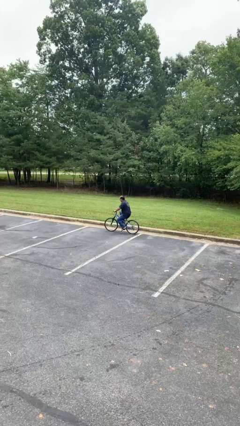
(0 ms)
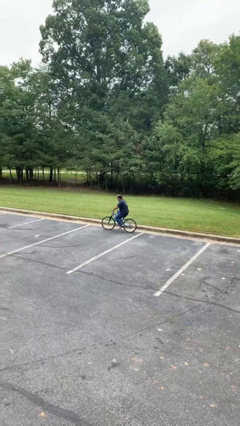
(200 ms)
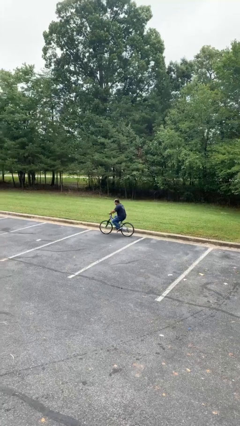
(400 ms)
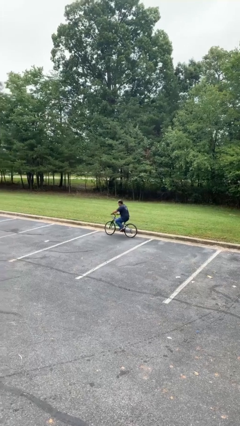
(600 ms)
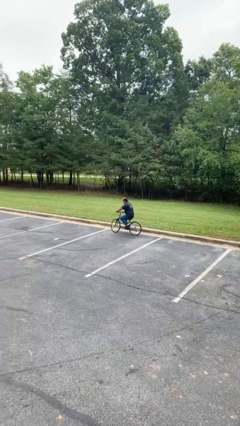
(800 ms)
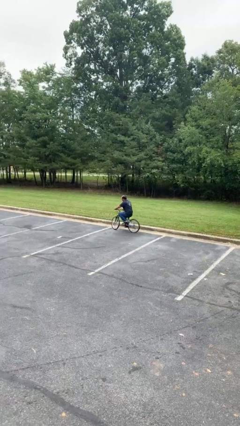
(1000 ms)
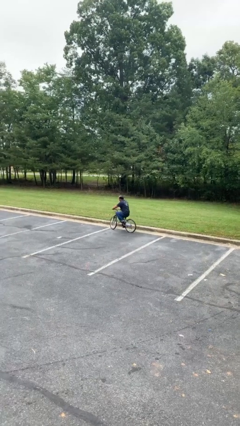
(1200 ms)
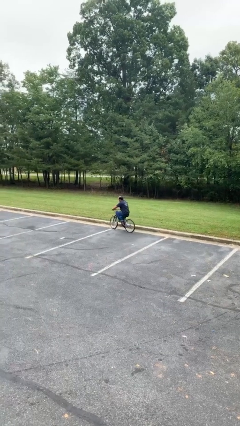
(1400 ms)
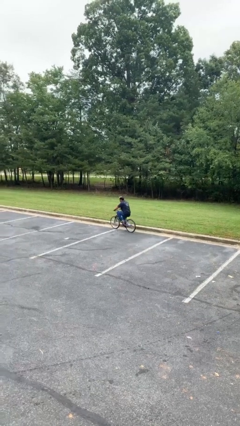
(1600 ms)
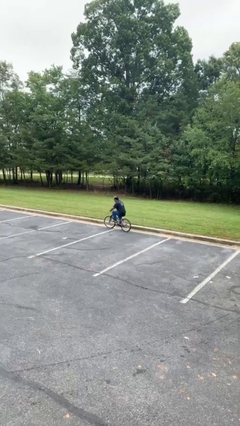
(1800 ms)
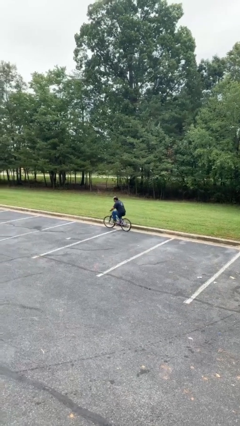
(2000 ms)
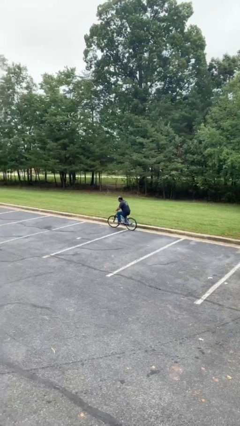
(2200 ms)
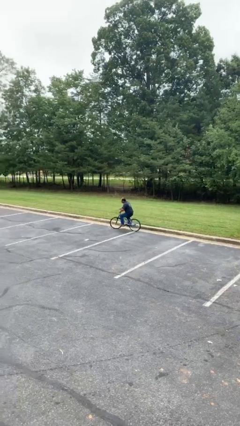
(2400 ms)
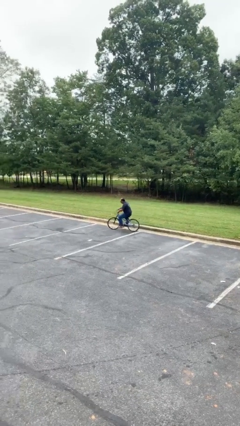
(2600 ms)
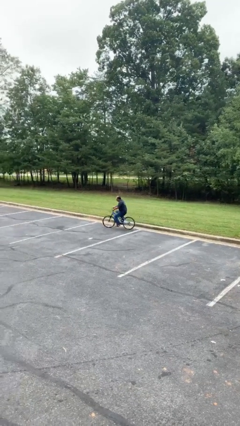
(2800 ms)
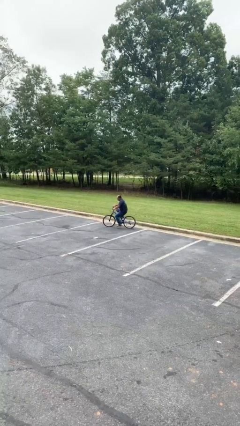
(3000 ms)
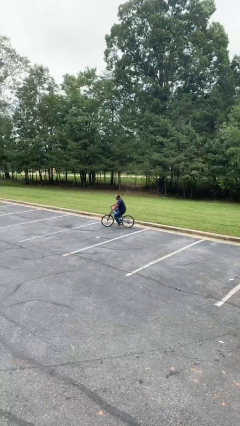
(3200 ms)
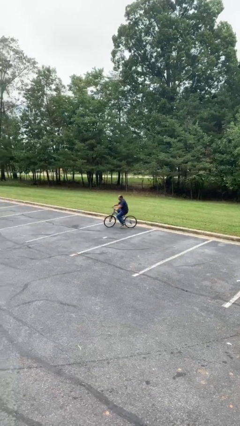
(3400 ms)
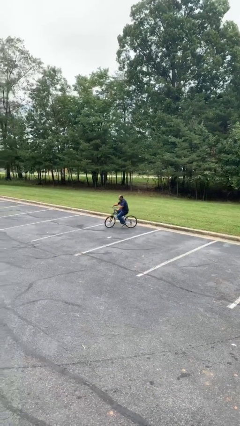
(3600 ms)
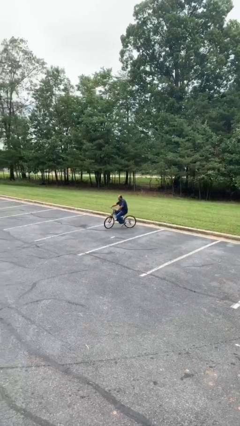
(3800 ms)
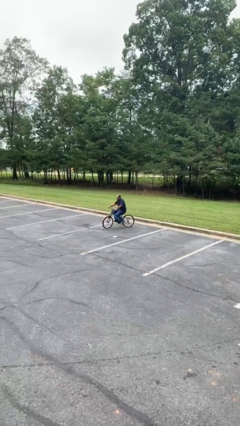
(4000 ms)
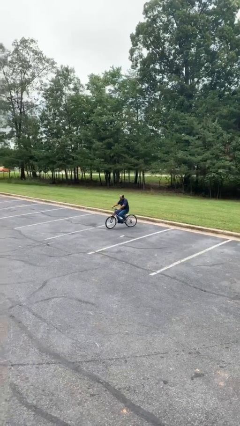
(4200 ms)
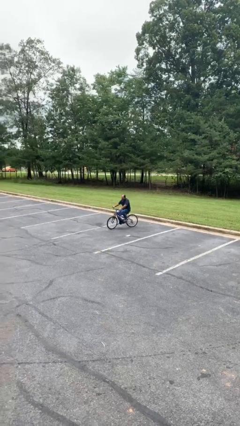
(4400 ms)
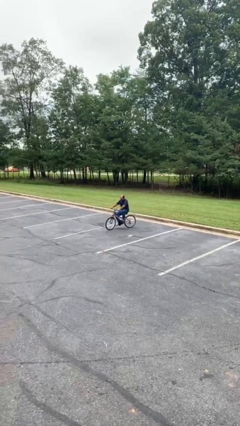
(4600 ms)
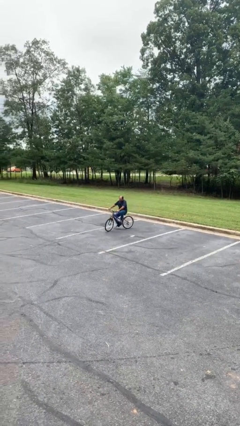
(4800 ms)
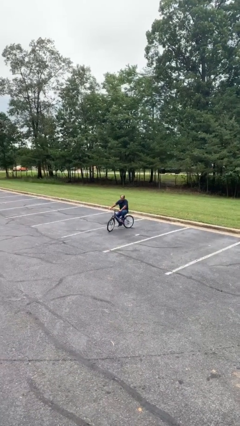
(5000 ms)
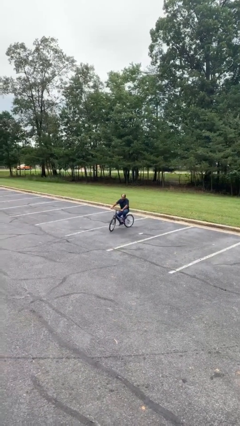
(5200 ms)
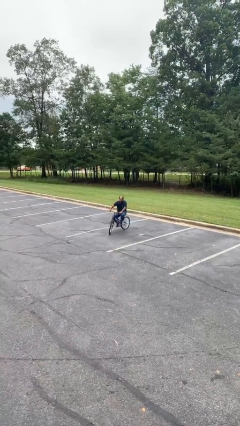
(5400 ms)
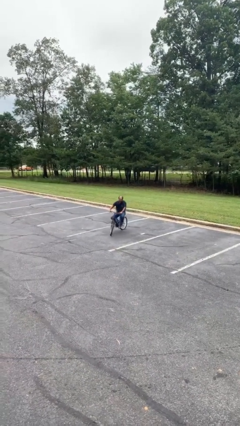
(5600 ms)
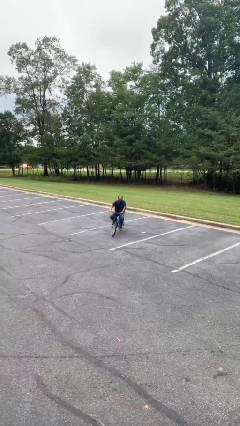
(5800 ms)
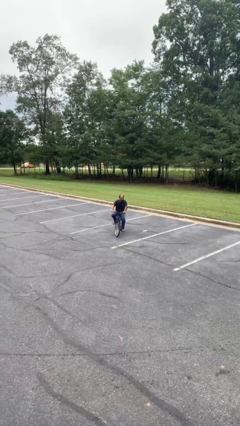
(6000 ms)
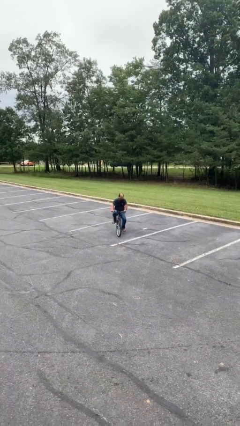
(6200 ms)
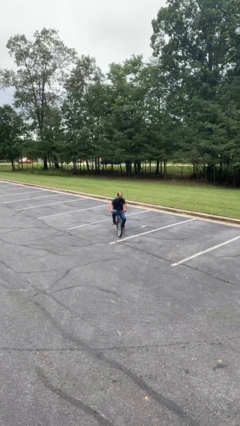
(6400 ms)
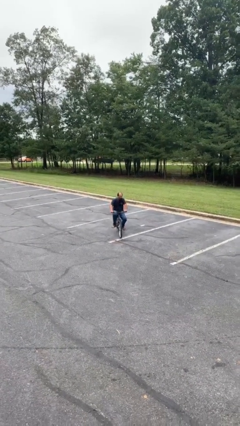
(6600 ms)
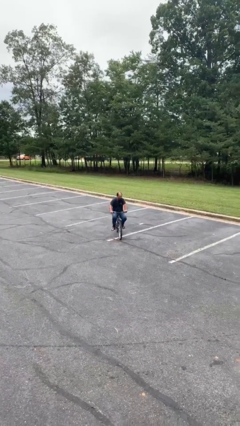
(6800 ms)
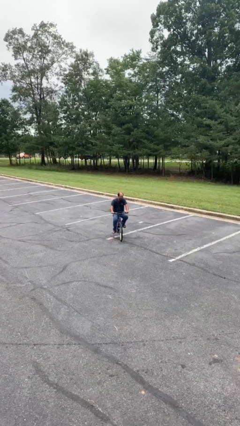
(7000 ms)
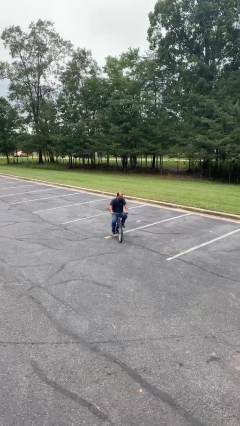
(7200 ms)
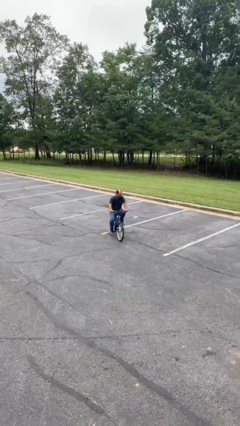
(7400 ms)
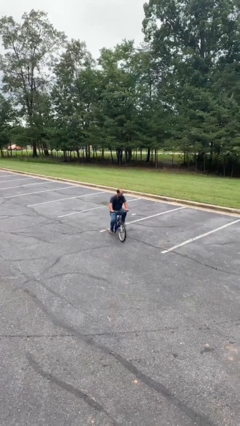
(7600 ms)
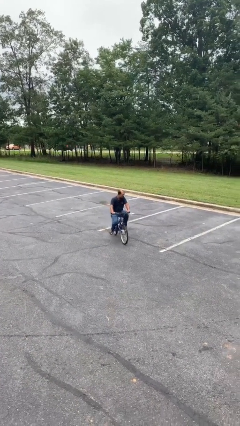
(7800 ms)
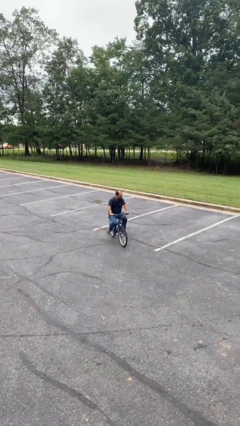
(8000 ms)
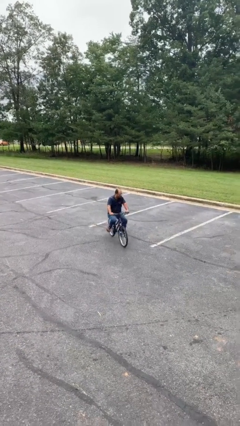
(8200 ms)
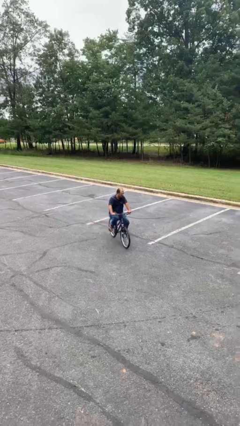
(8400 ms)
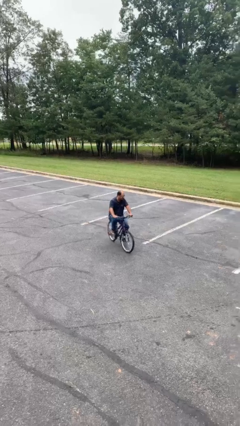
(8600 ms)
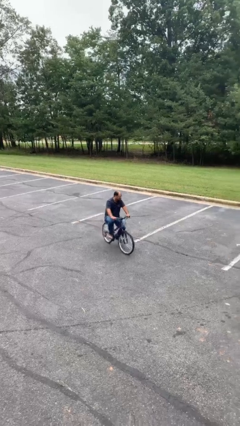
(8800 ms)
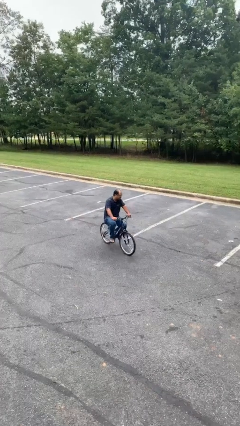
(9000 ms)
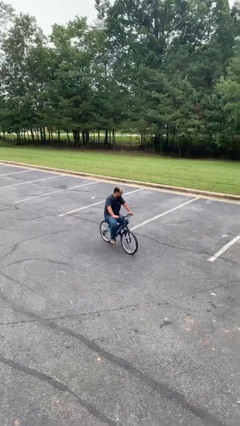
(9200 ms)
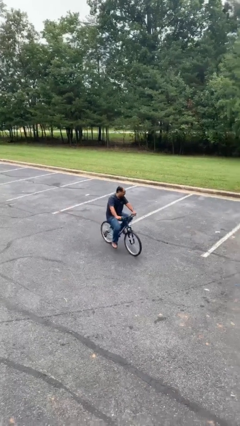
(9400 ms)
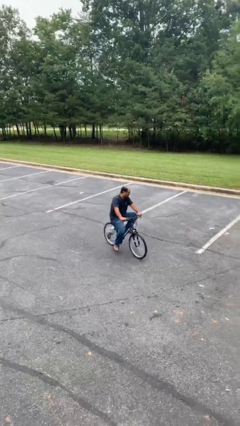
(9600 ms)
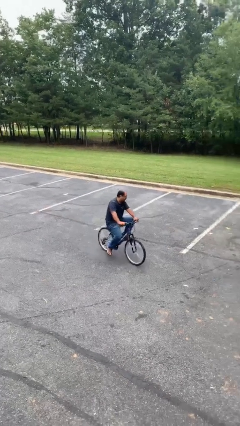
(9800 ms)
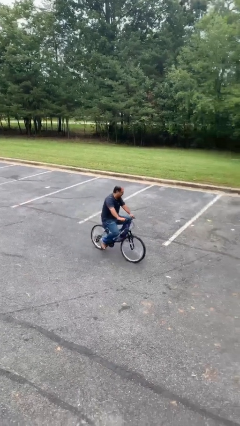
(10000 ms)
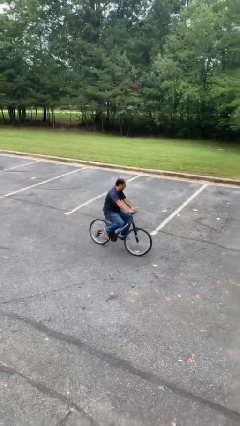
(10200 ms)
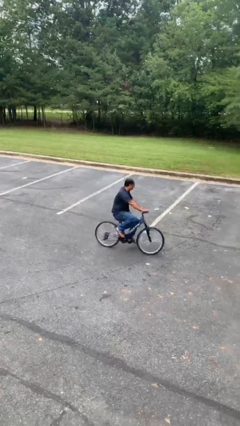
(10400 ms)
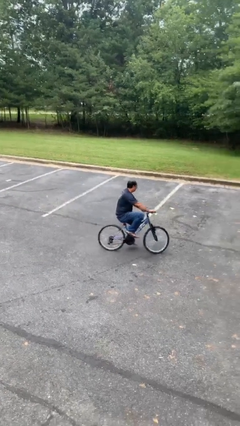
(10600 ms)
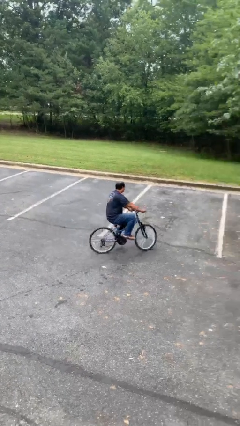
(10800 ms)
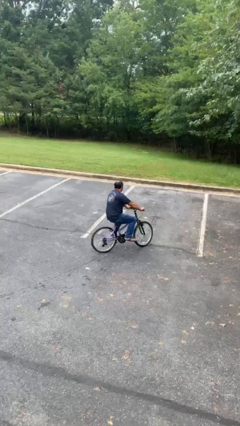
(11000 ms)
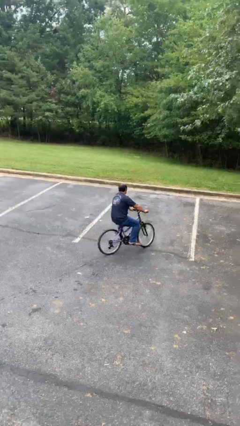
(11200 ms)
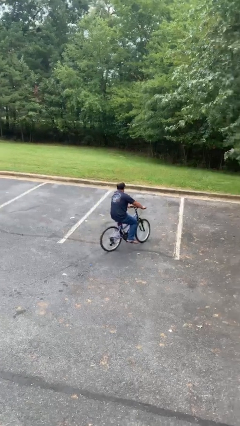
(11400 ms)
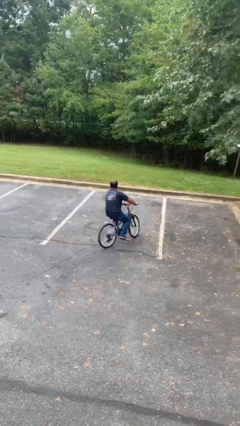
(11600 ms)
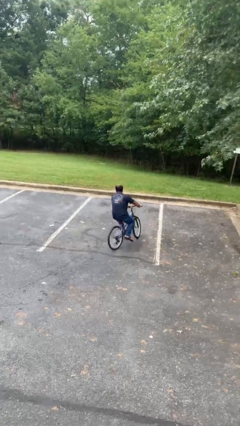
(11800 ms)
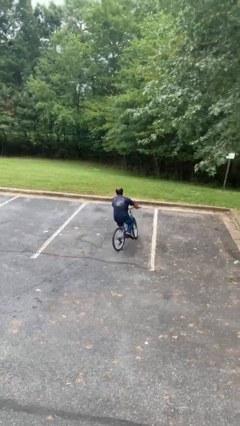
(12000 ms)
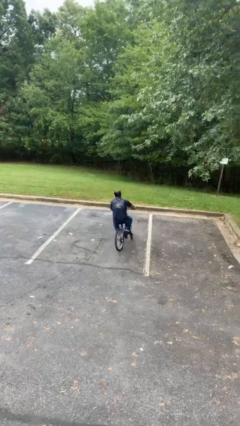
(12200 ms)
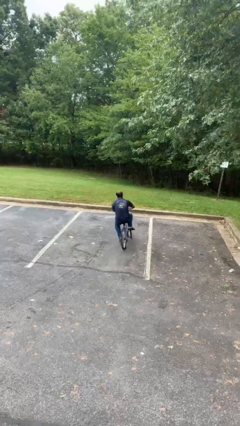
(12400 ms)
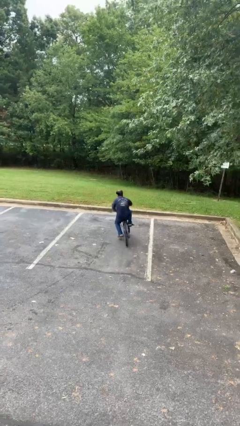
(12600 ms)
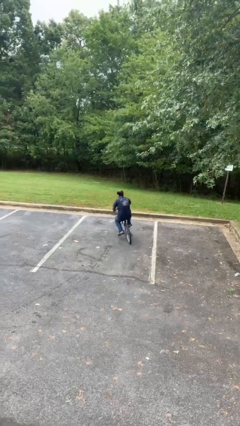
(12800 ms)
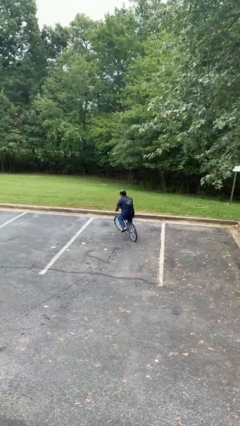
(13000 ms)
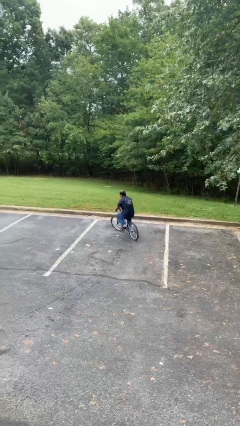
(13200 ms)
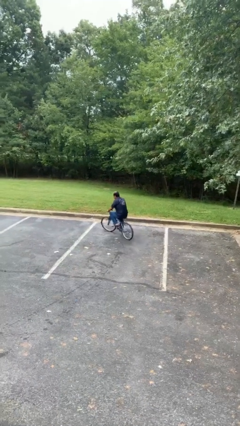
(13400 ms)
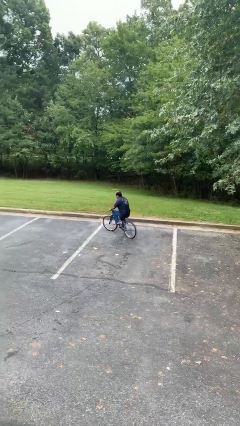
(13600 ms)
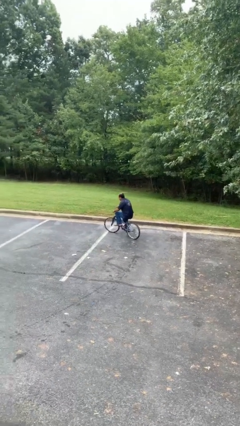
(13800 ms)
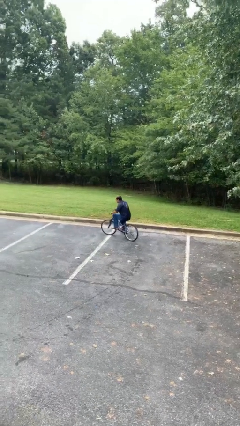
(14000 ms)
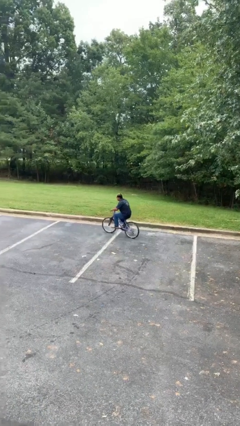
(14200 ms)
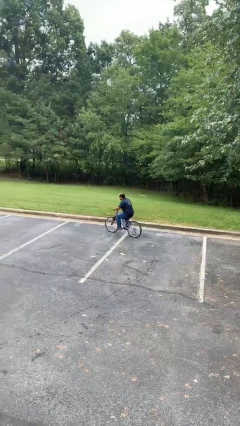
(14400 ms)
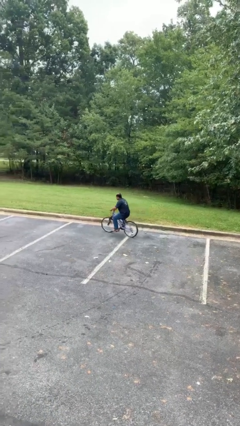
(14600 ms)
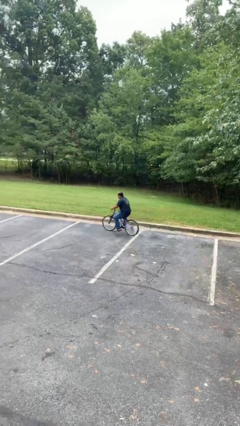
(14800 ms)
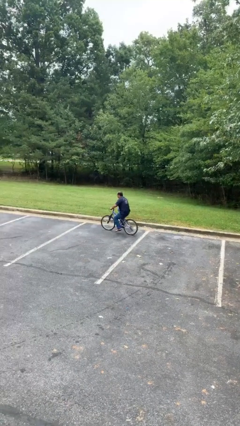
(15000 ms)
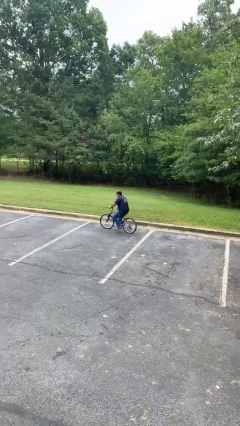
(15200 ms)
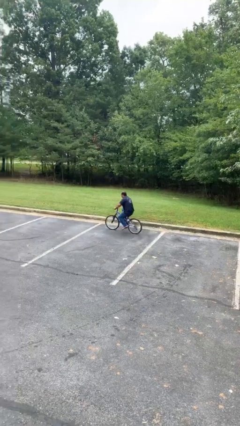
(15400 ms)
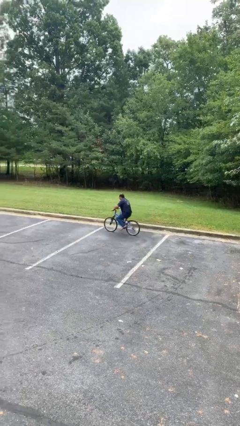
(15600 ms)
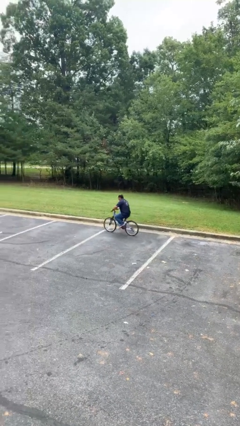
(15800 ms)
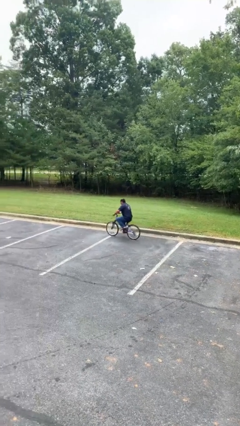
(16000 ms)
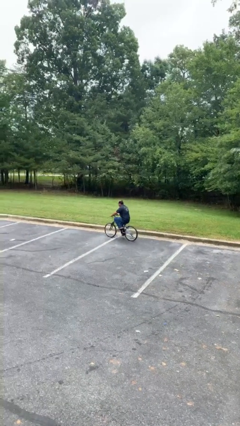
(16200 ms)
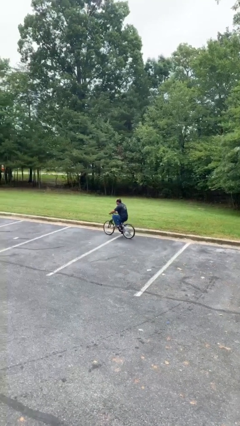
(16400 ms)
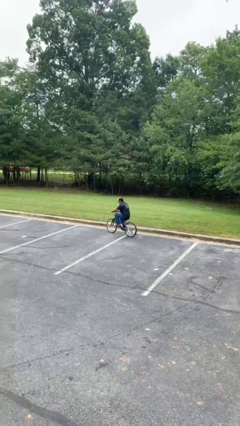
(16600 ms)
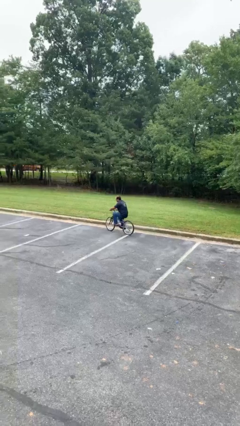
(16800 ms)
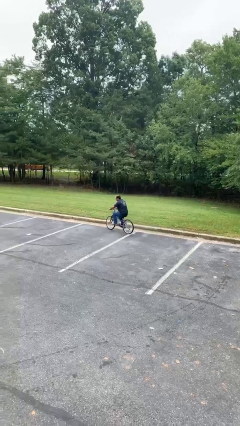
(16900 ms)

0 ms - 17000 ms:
person rides bicycle

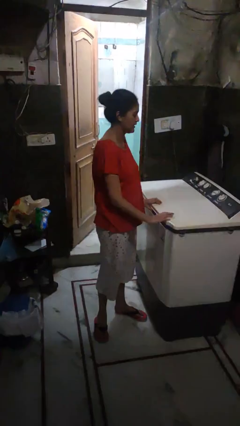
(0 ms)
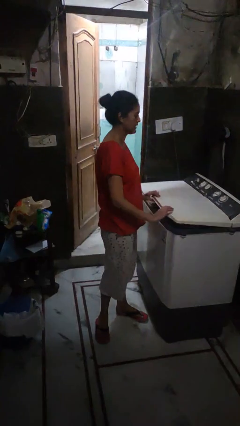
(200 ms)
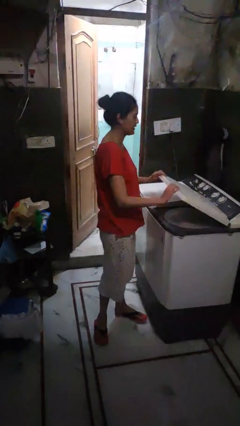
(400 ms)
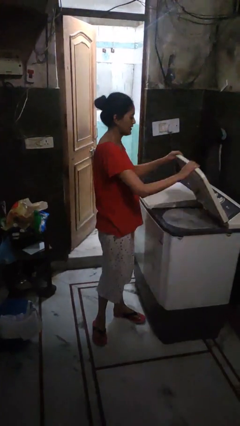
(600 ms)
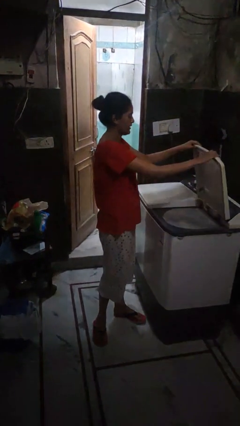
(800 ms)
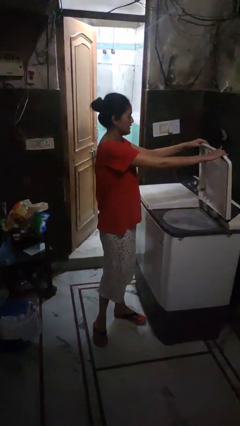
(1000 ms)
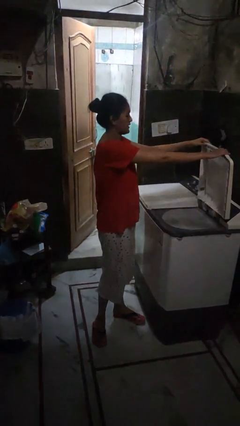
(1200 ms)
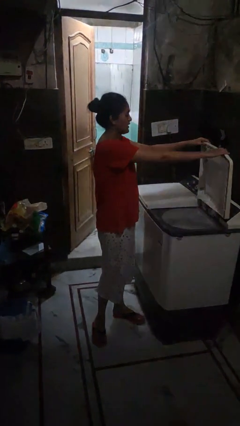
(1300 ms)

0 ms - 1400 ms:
person opens clothes washer
